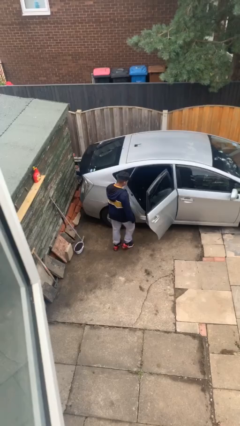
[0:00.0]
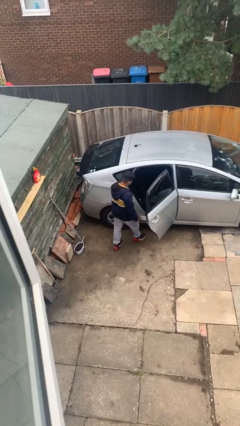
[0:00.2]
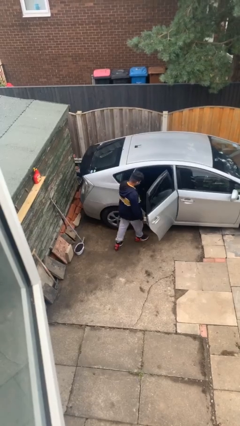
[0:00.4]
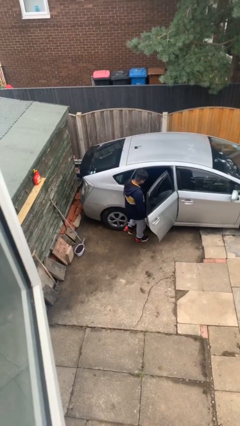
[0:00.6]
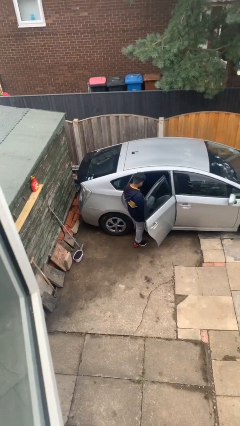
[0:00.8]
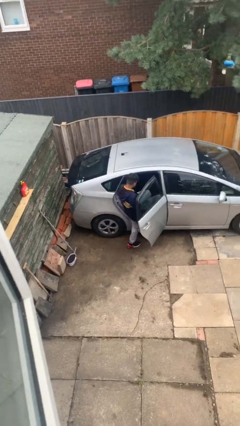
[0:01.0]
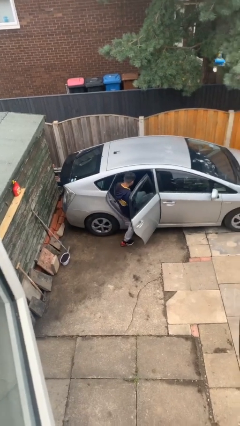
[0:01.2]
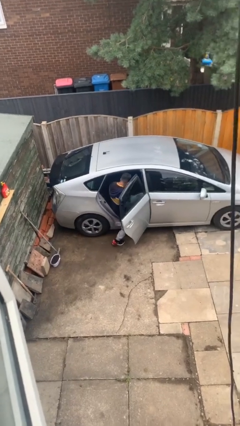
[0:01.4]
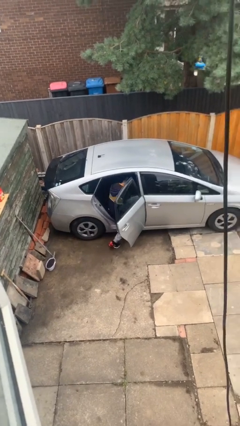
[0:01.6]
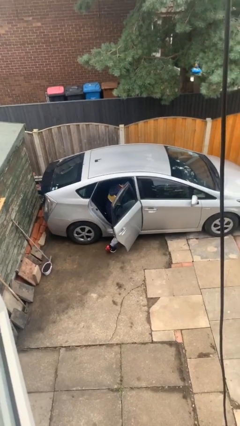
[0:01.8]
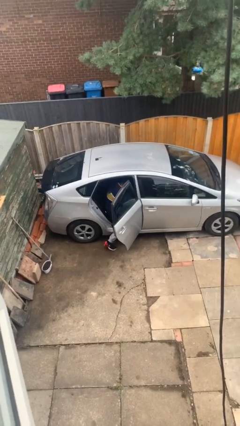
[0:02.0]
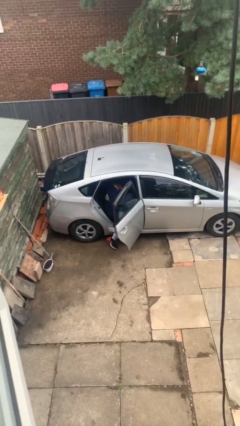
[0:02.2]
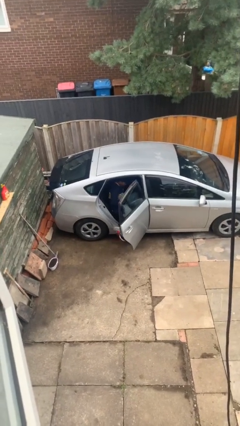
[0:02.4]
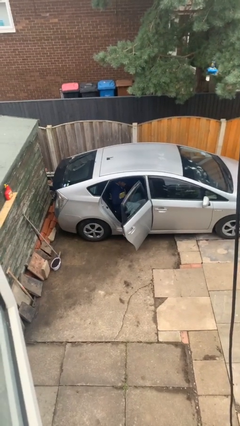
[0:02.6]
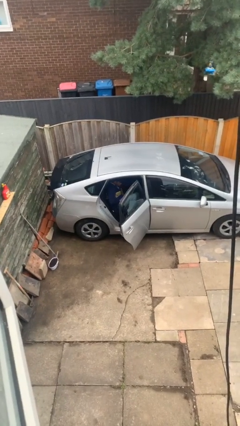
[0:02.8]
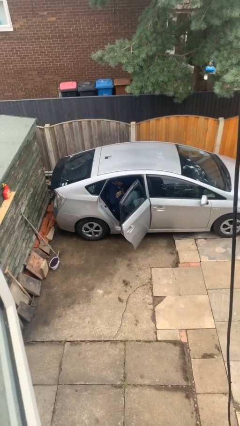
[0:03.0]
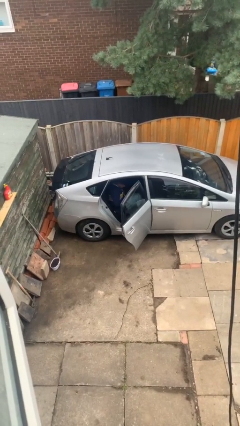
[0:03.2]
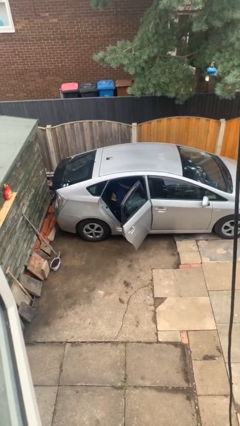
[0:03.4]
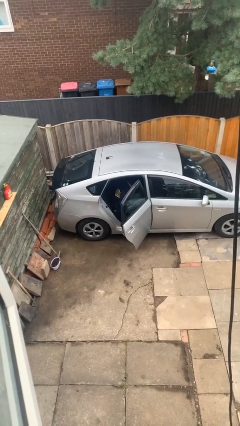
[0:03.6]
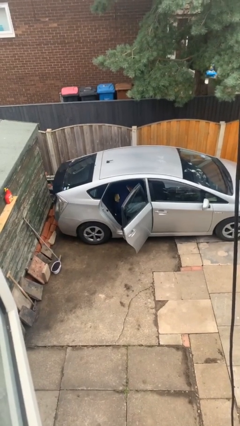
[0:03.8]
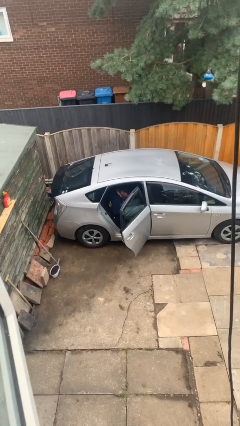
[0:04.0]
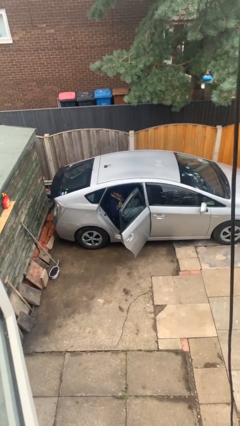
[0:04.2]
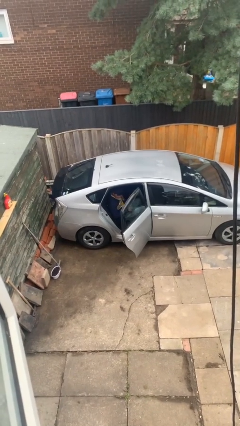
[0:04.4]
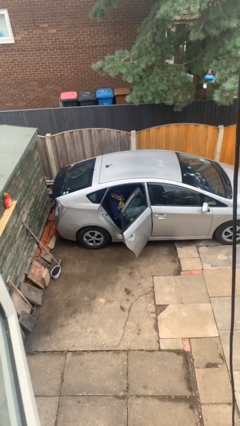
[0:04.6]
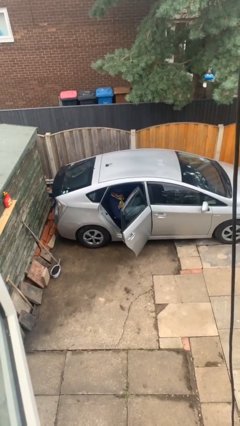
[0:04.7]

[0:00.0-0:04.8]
person enters car

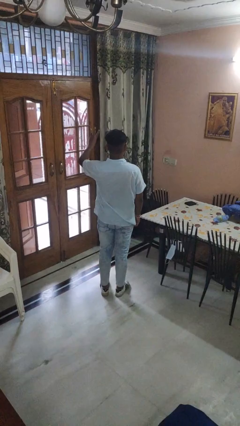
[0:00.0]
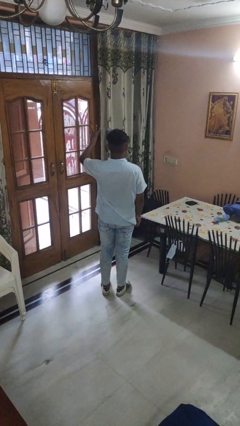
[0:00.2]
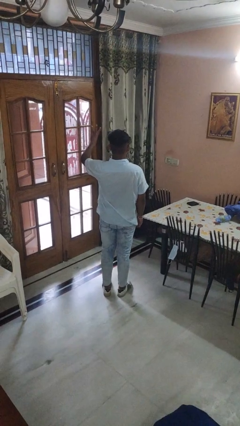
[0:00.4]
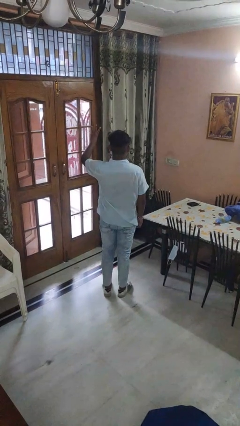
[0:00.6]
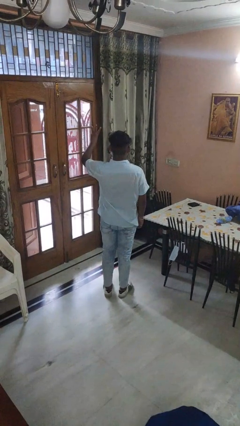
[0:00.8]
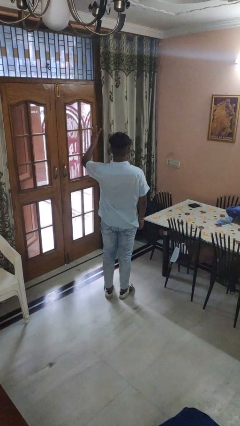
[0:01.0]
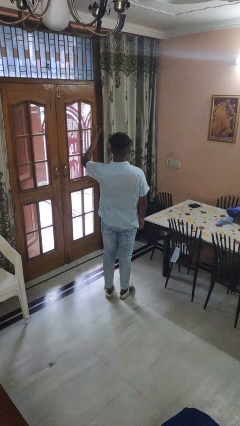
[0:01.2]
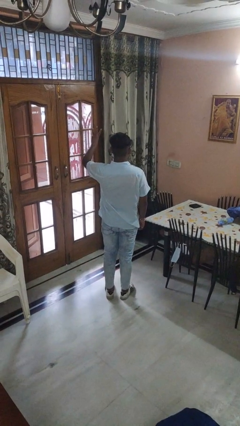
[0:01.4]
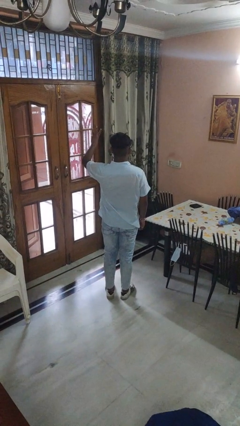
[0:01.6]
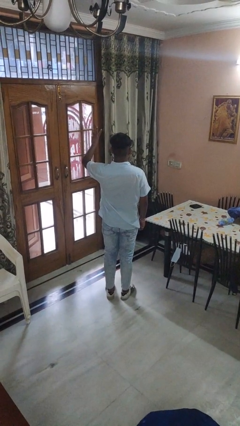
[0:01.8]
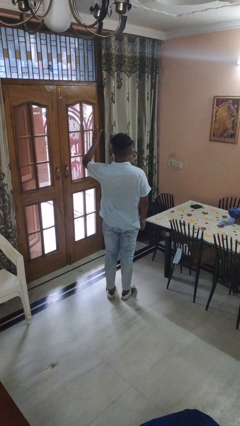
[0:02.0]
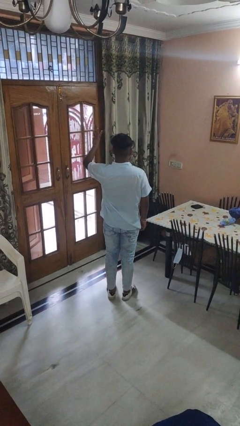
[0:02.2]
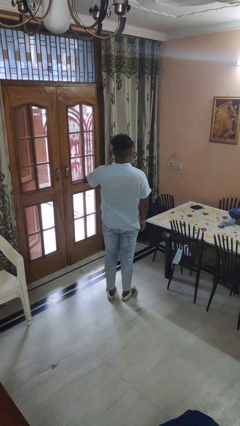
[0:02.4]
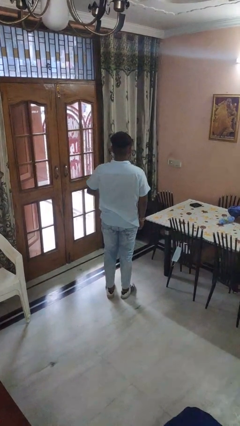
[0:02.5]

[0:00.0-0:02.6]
person gestures number three

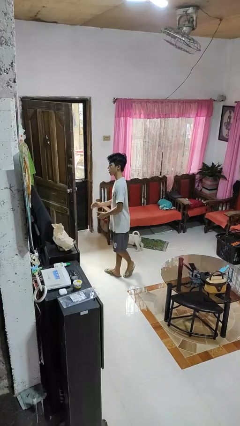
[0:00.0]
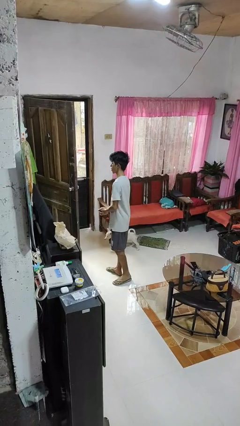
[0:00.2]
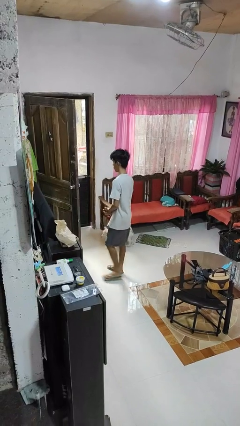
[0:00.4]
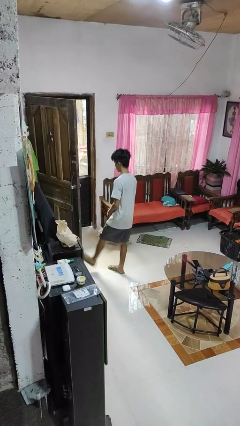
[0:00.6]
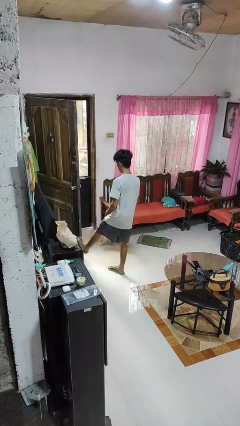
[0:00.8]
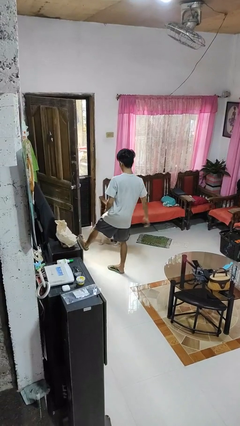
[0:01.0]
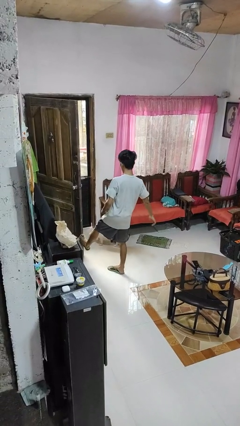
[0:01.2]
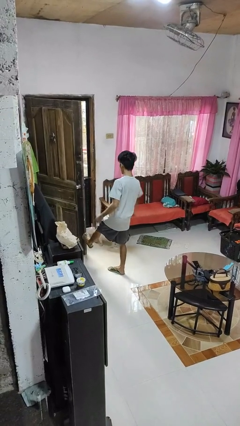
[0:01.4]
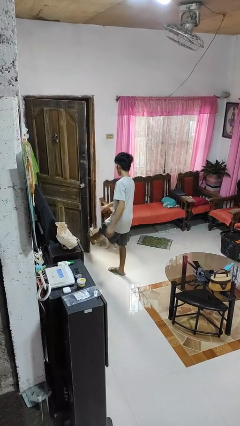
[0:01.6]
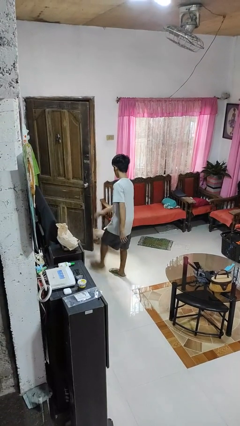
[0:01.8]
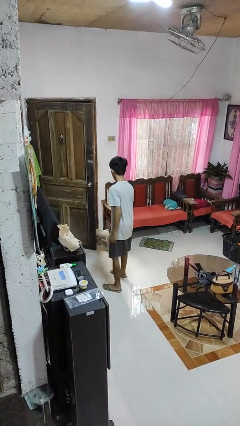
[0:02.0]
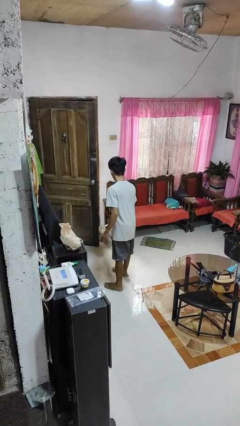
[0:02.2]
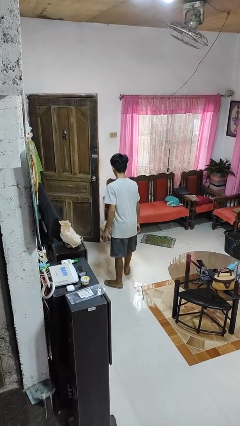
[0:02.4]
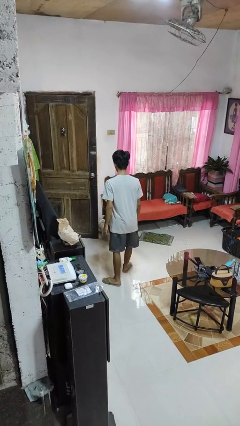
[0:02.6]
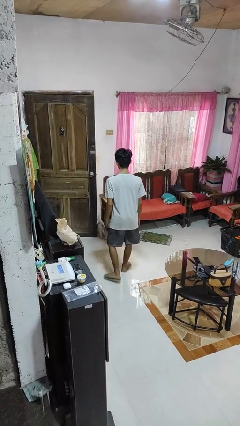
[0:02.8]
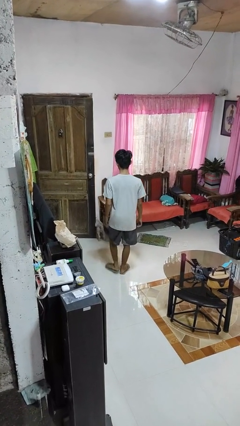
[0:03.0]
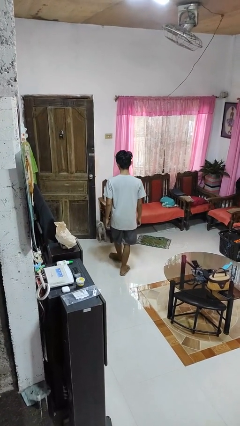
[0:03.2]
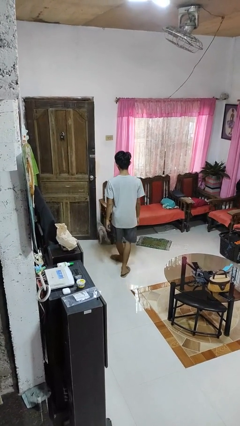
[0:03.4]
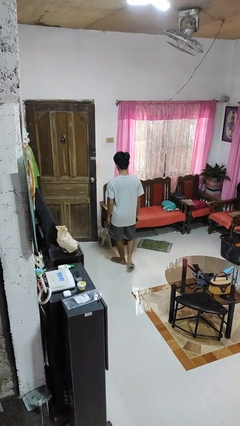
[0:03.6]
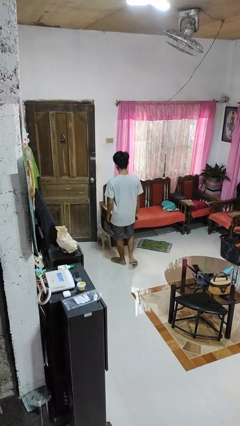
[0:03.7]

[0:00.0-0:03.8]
person closes door with foot

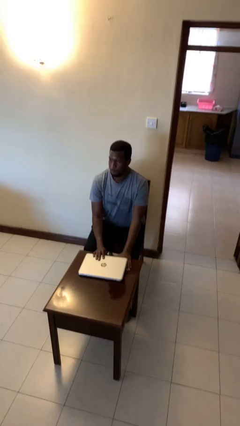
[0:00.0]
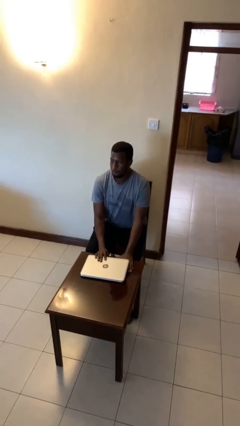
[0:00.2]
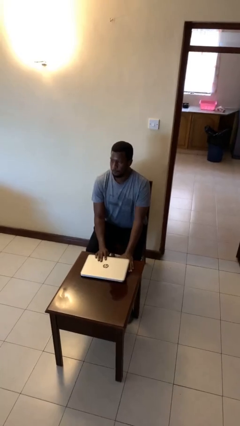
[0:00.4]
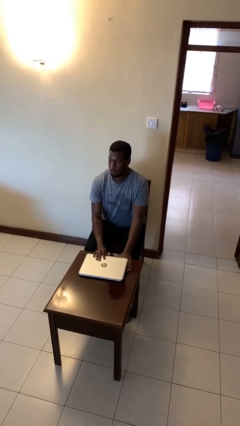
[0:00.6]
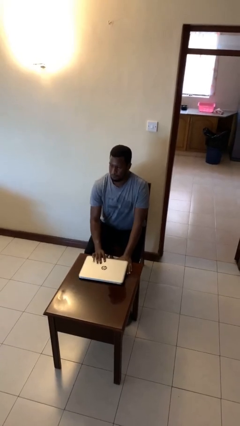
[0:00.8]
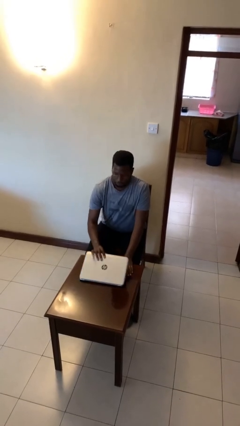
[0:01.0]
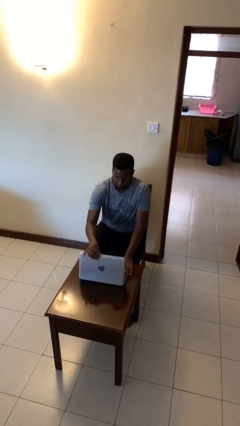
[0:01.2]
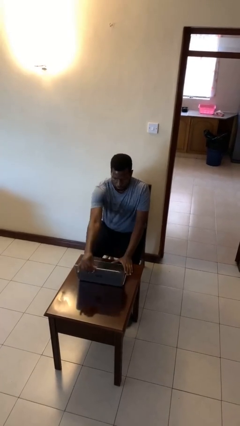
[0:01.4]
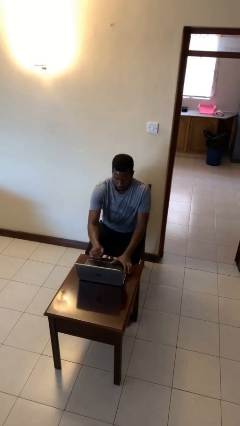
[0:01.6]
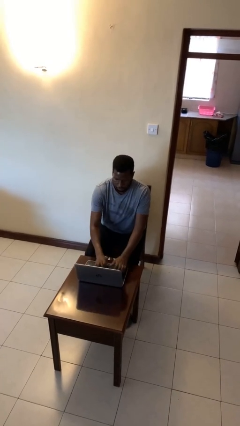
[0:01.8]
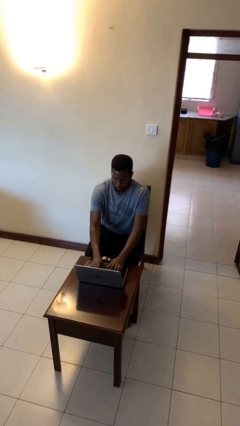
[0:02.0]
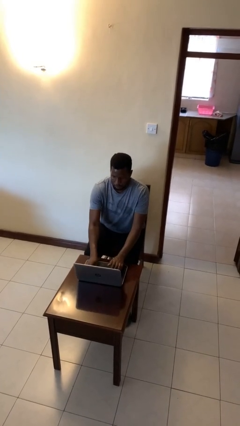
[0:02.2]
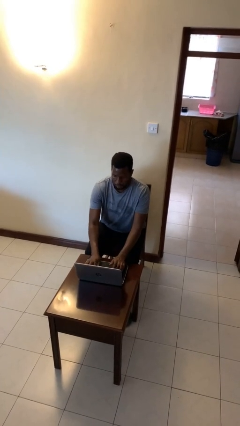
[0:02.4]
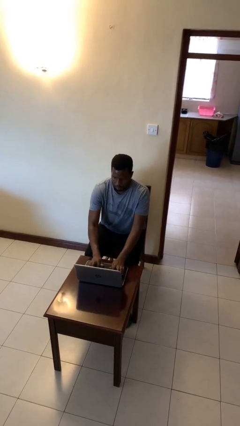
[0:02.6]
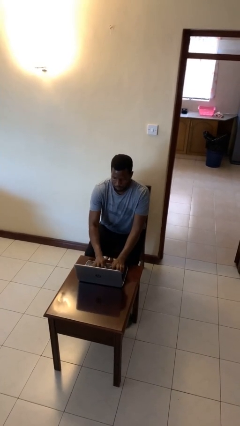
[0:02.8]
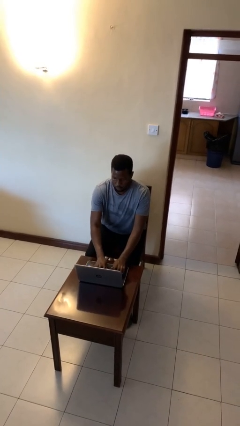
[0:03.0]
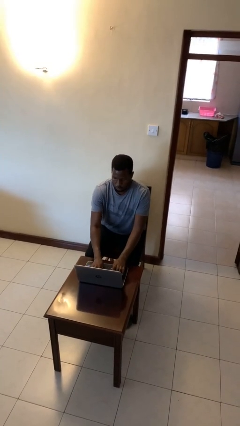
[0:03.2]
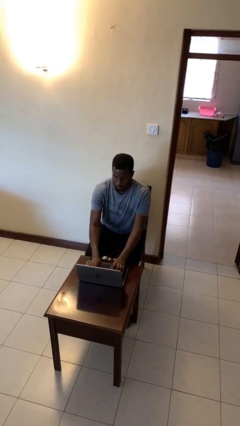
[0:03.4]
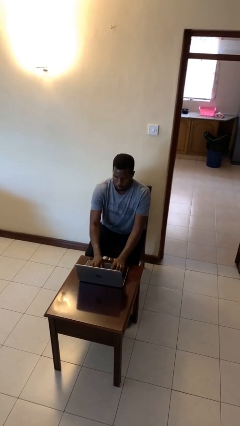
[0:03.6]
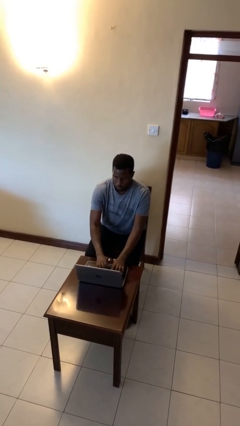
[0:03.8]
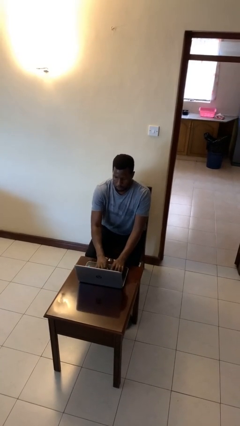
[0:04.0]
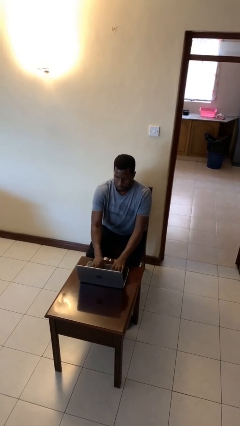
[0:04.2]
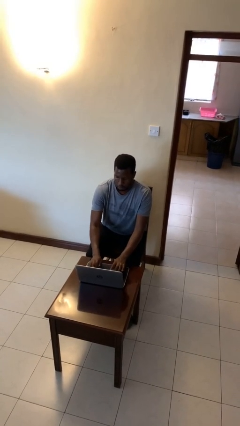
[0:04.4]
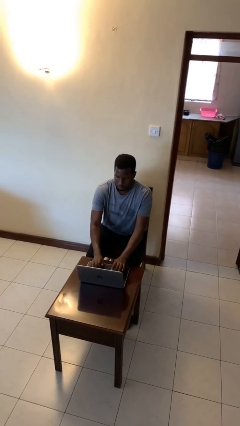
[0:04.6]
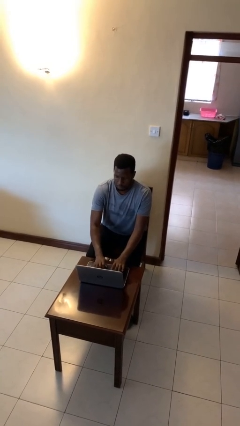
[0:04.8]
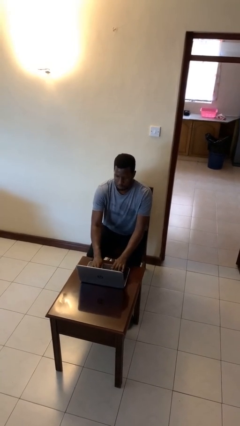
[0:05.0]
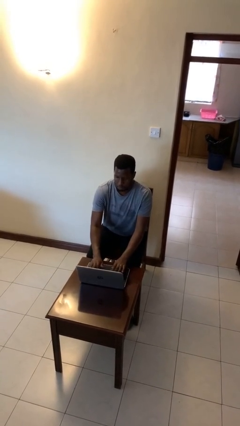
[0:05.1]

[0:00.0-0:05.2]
person interacts with laptop

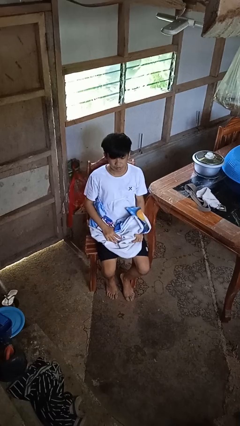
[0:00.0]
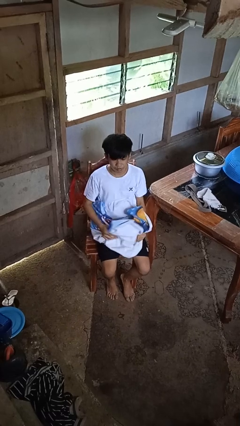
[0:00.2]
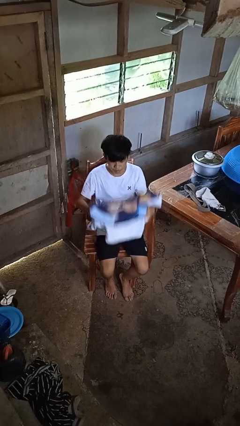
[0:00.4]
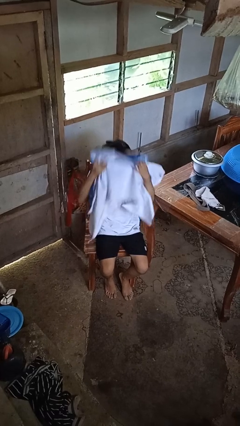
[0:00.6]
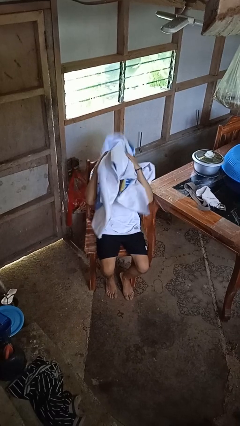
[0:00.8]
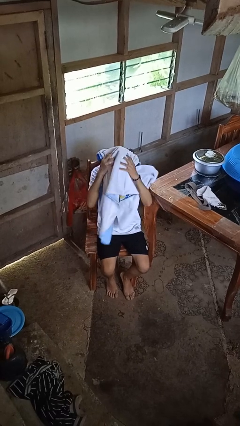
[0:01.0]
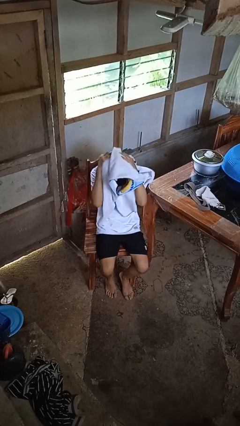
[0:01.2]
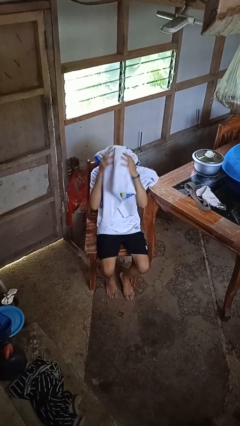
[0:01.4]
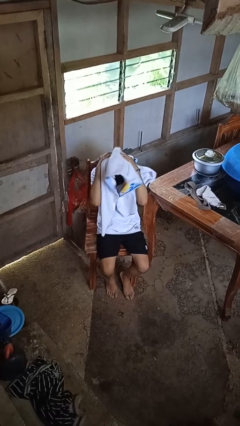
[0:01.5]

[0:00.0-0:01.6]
person dries hair with towel
